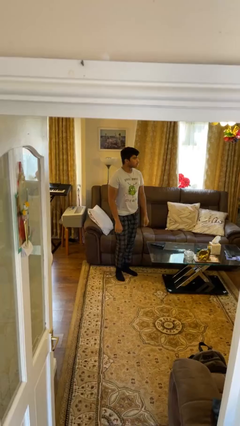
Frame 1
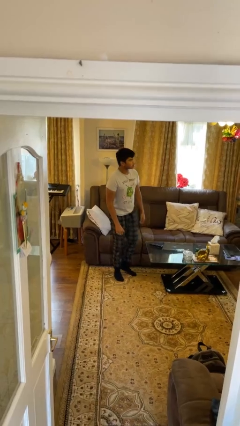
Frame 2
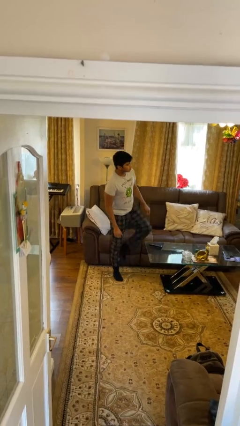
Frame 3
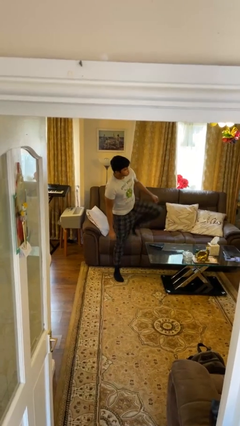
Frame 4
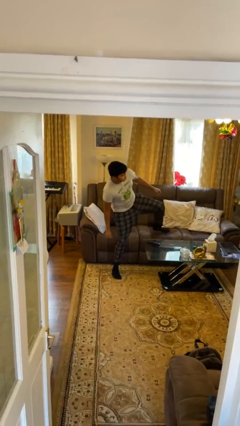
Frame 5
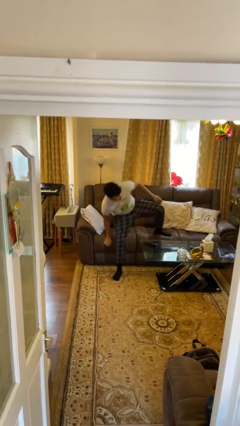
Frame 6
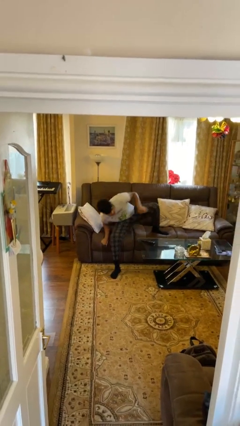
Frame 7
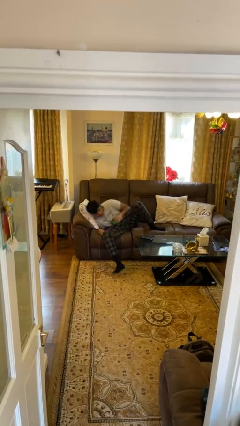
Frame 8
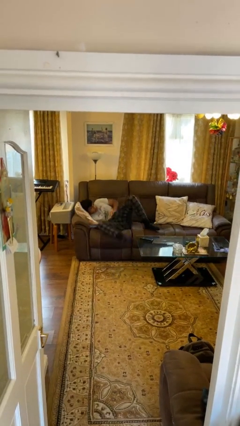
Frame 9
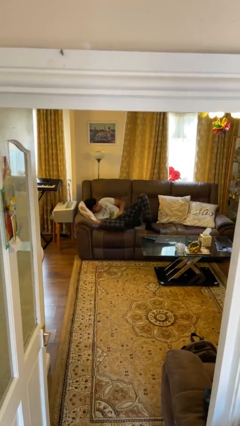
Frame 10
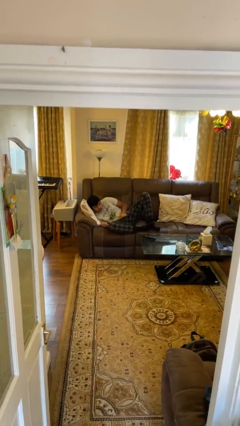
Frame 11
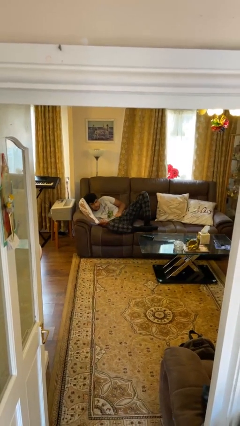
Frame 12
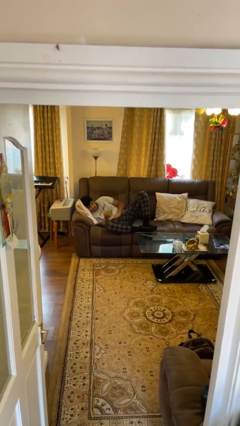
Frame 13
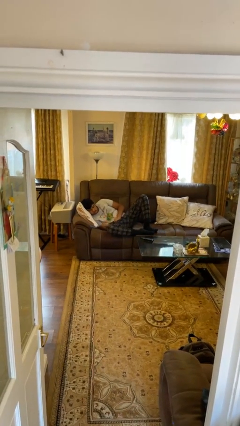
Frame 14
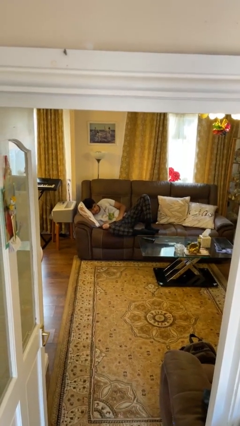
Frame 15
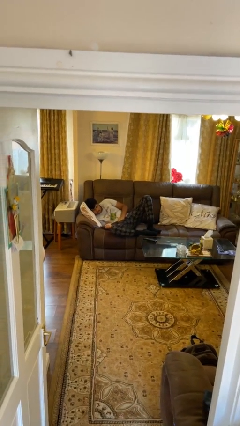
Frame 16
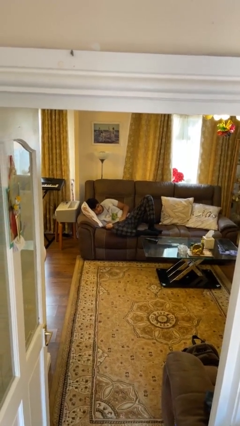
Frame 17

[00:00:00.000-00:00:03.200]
person lies down on couch

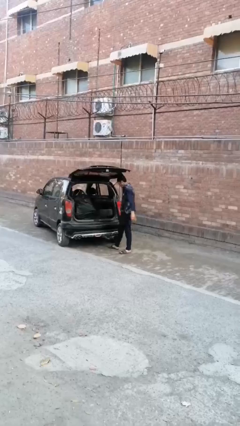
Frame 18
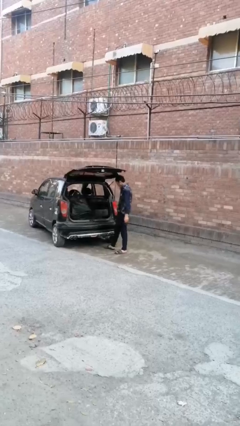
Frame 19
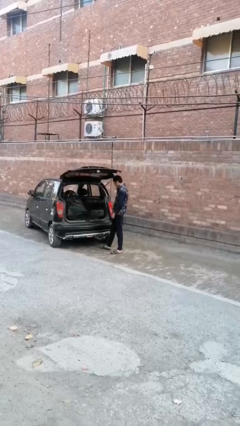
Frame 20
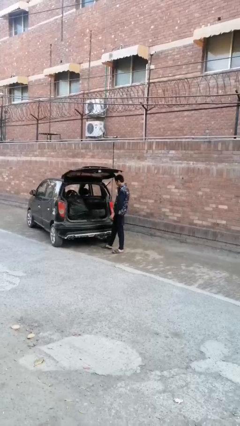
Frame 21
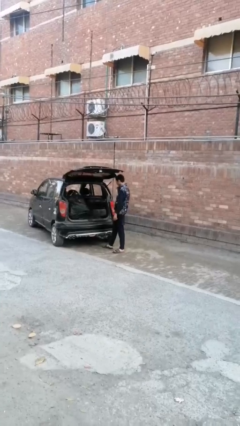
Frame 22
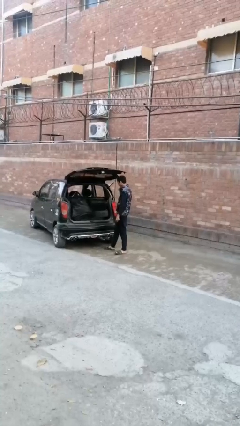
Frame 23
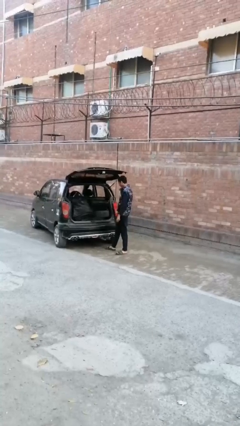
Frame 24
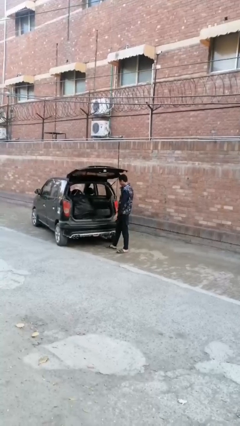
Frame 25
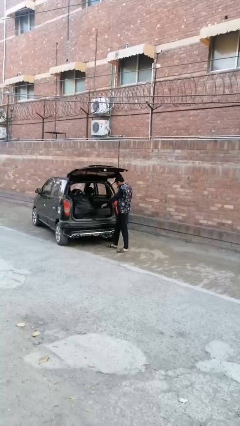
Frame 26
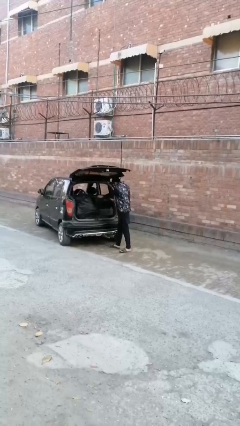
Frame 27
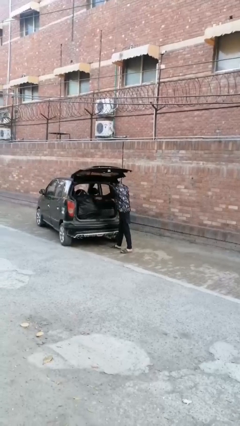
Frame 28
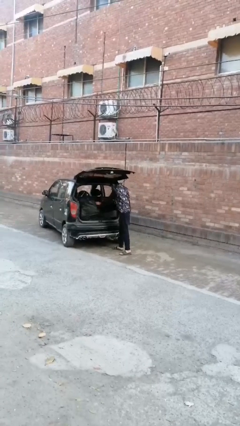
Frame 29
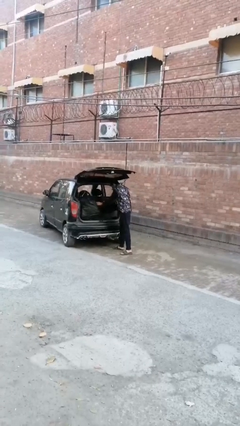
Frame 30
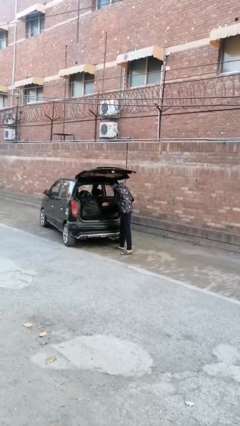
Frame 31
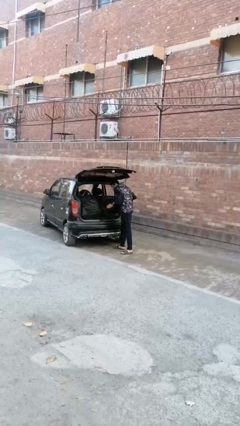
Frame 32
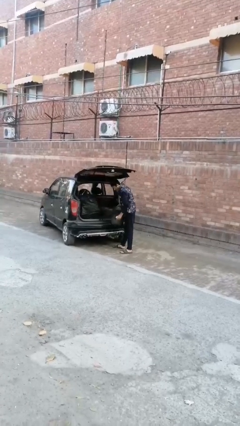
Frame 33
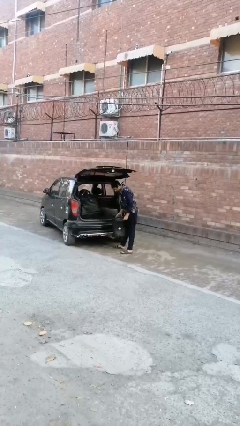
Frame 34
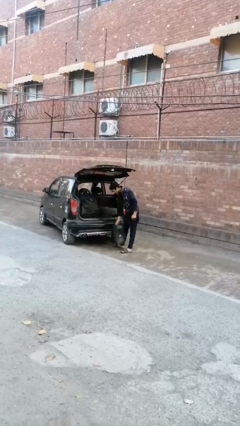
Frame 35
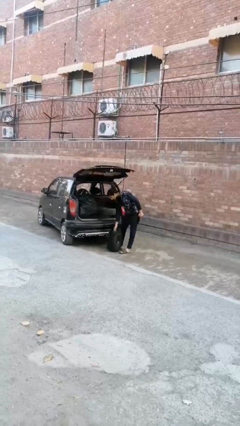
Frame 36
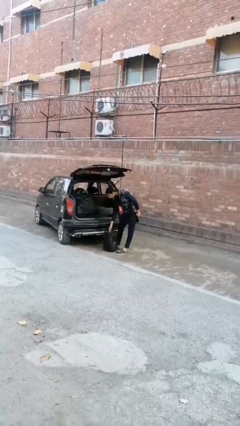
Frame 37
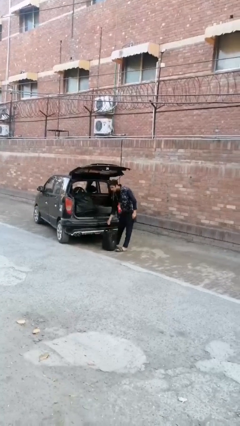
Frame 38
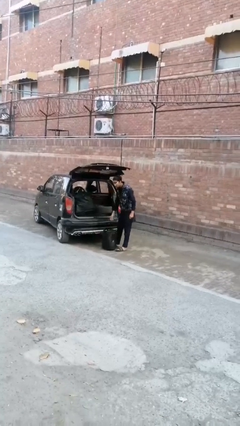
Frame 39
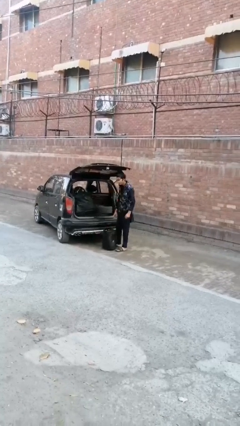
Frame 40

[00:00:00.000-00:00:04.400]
person loads car

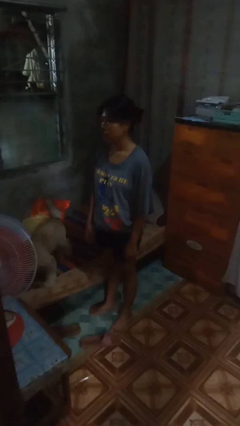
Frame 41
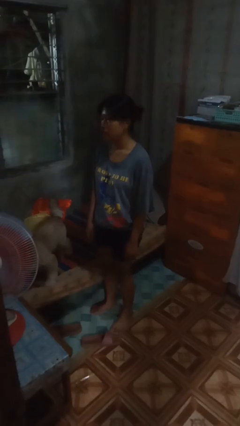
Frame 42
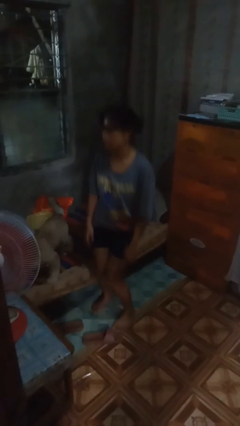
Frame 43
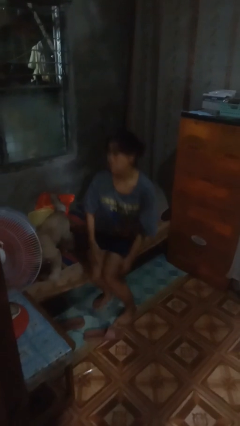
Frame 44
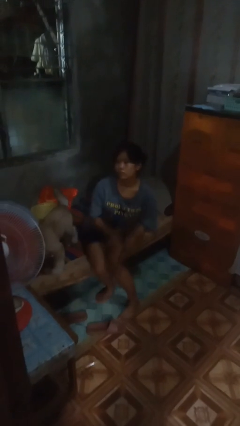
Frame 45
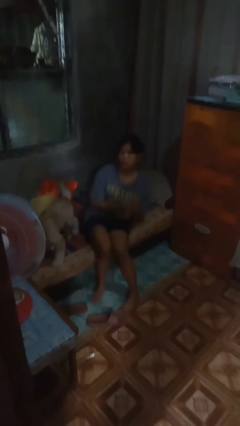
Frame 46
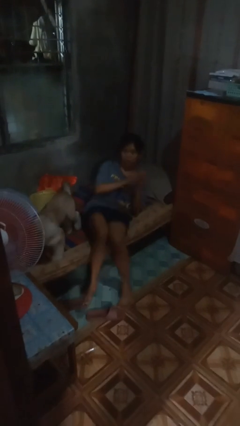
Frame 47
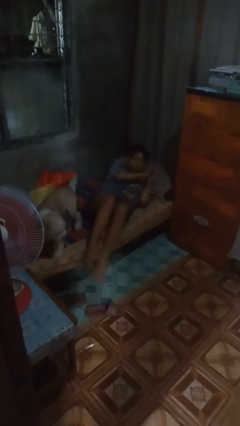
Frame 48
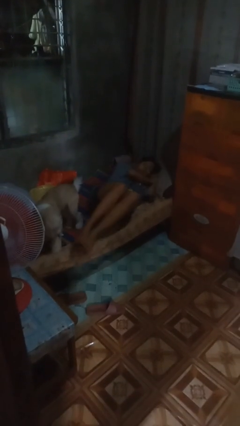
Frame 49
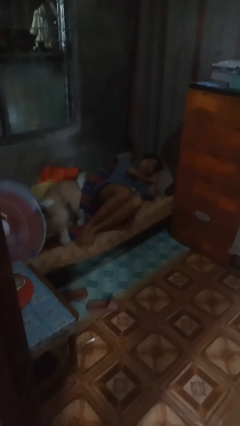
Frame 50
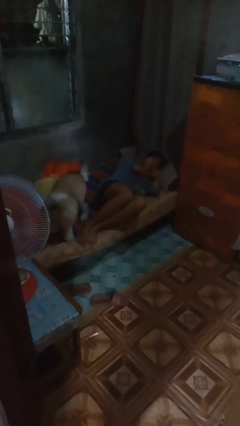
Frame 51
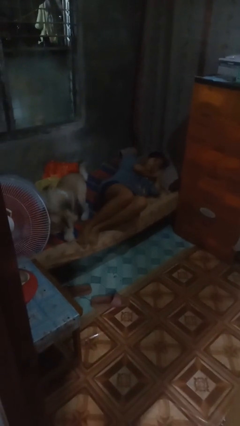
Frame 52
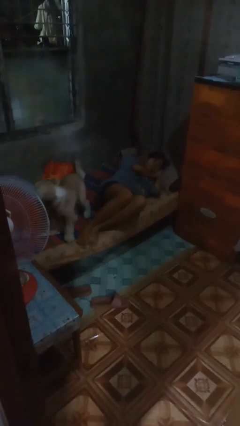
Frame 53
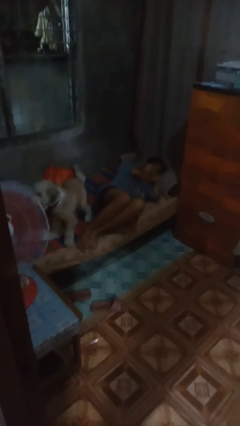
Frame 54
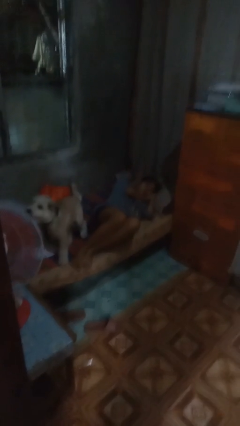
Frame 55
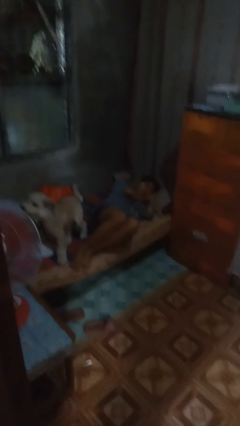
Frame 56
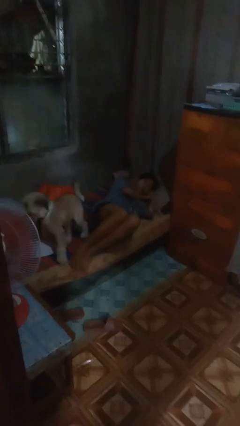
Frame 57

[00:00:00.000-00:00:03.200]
person lies down on bed

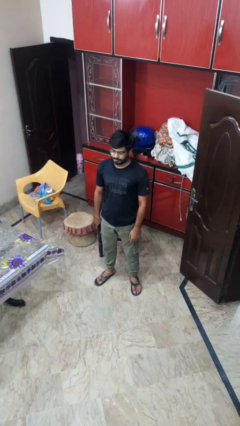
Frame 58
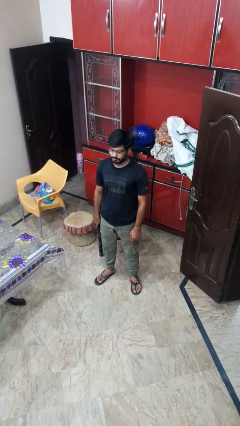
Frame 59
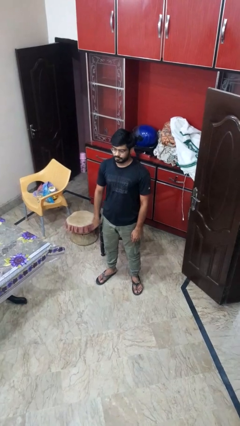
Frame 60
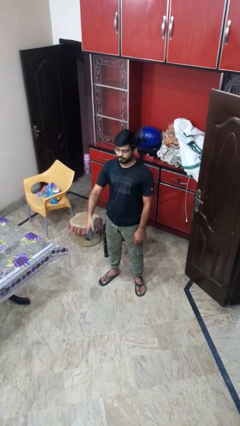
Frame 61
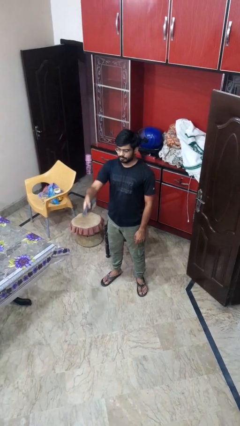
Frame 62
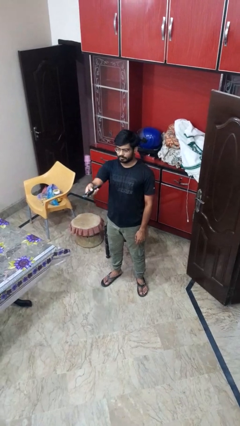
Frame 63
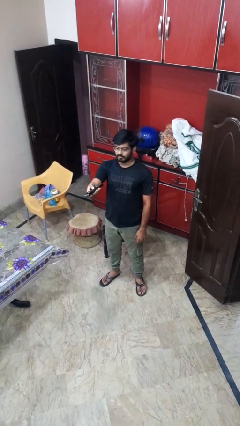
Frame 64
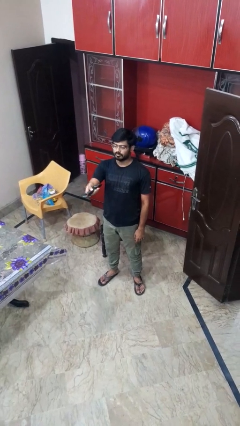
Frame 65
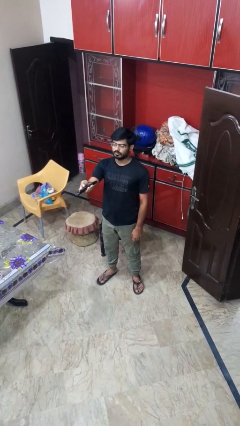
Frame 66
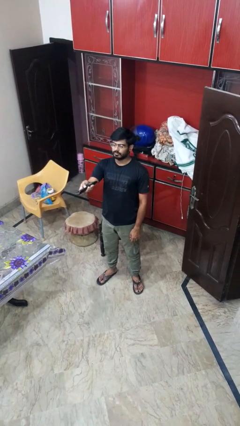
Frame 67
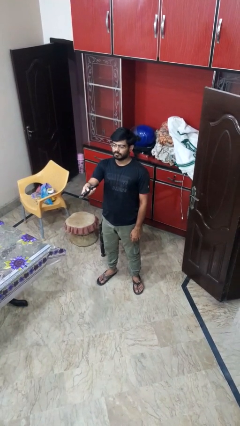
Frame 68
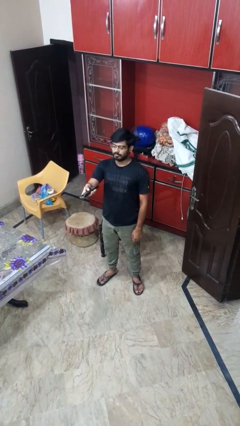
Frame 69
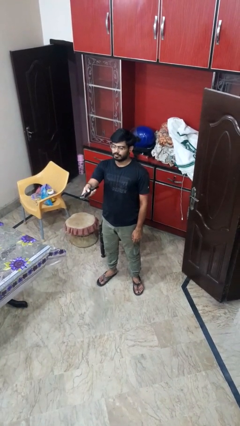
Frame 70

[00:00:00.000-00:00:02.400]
person uses television remote

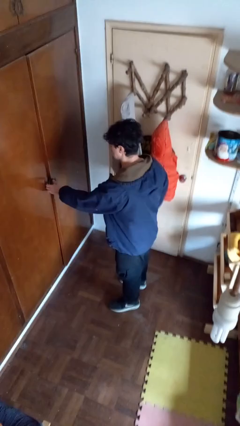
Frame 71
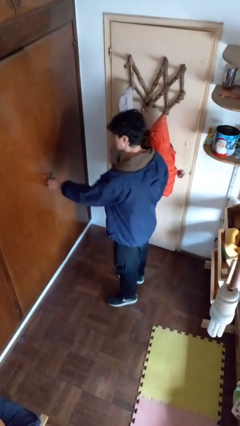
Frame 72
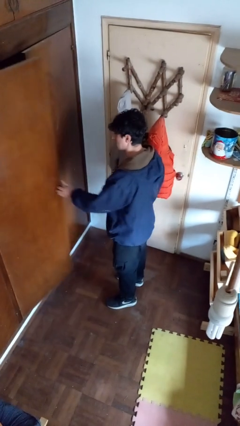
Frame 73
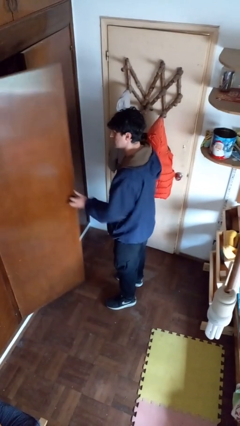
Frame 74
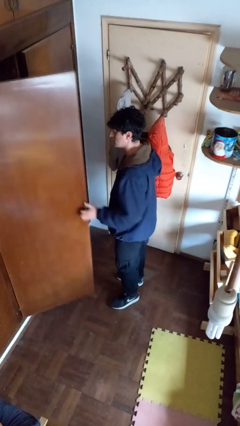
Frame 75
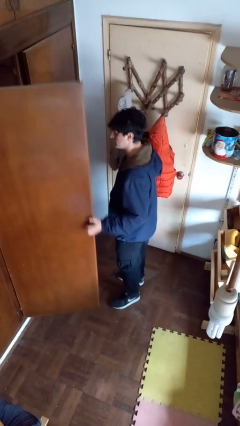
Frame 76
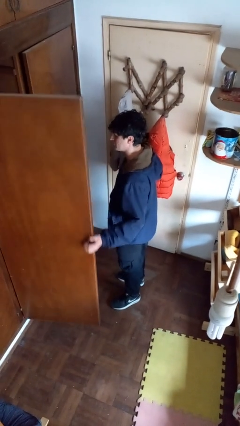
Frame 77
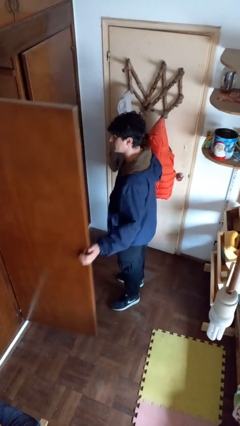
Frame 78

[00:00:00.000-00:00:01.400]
person opens closet door

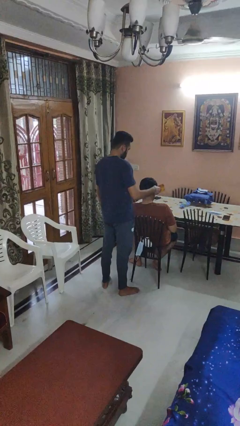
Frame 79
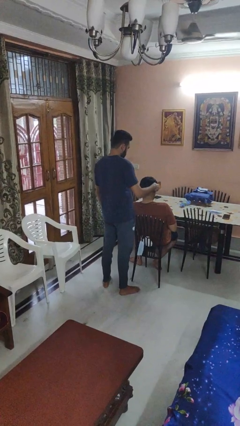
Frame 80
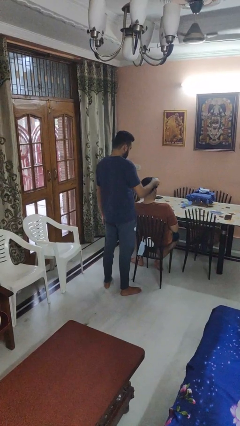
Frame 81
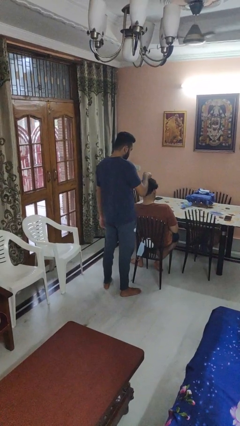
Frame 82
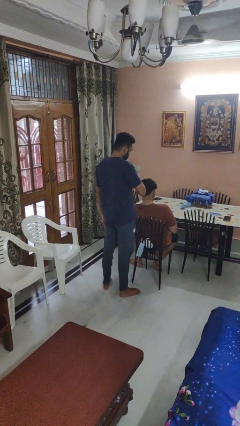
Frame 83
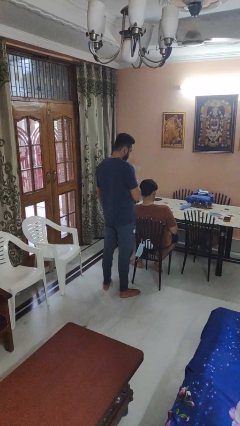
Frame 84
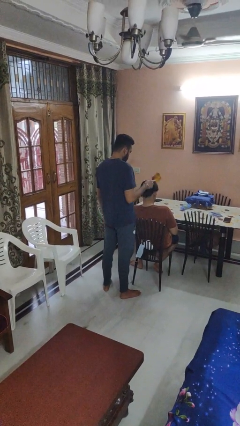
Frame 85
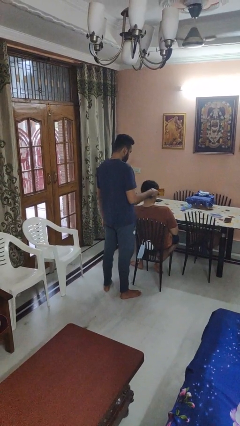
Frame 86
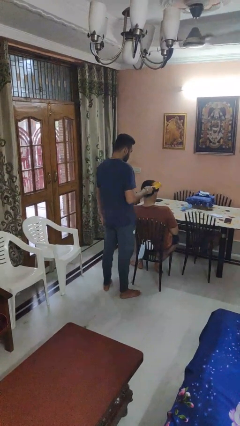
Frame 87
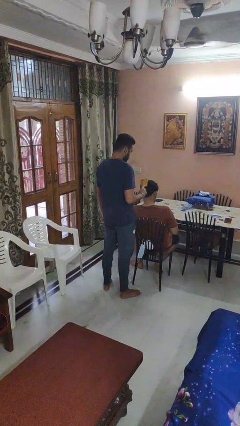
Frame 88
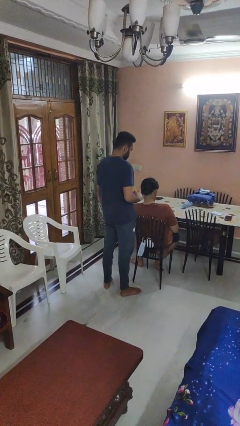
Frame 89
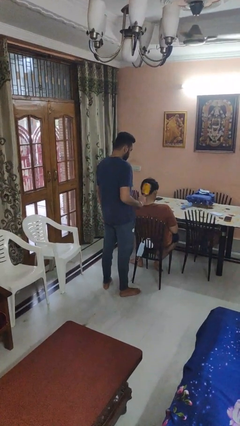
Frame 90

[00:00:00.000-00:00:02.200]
person brushes hair of person

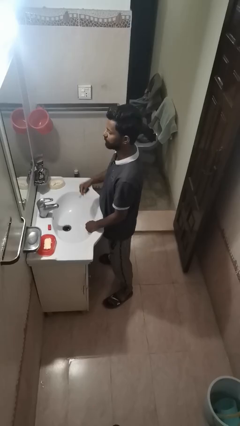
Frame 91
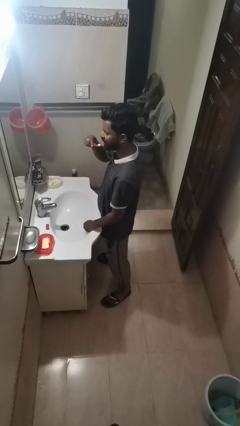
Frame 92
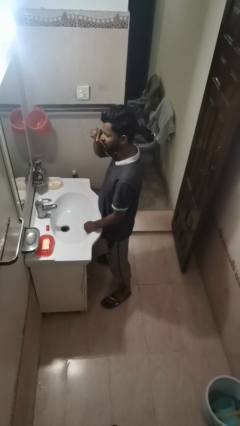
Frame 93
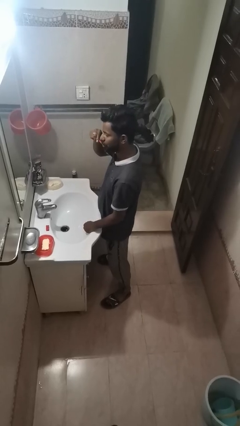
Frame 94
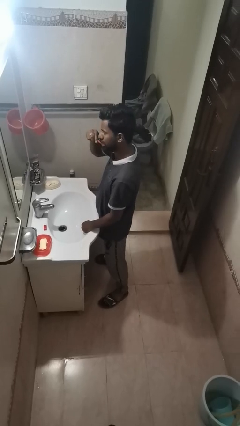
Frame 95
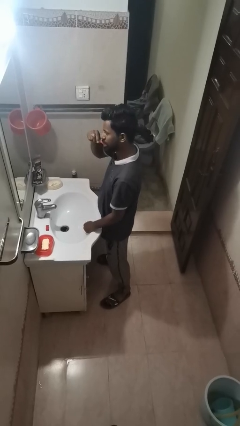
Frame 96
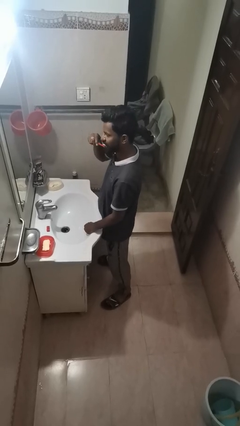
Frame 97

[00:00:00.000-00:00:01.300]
person brushes teeth
